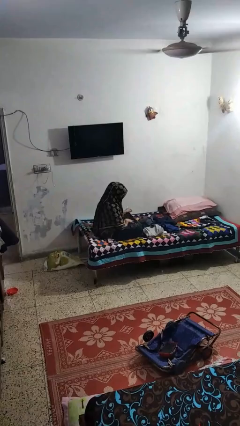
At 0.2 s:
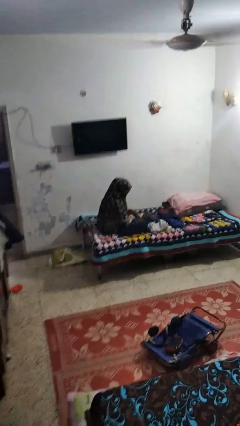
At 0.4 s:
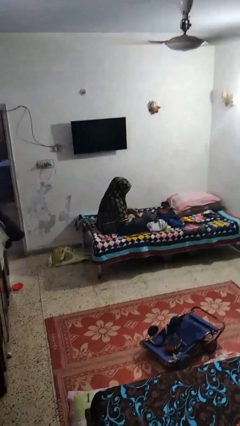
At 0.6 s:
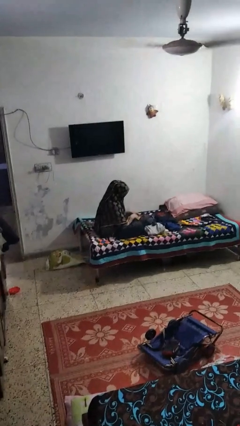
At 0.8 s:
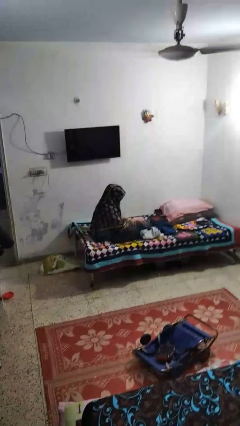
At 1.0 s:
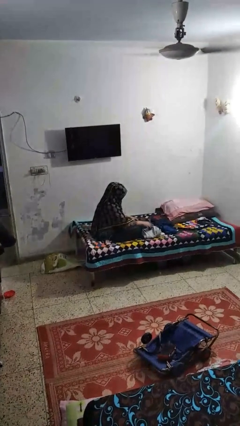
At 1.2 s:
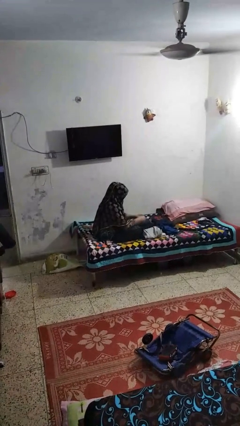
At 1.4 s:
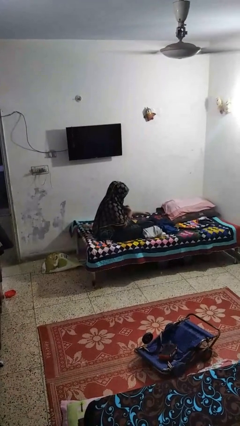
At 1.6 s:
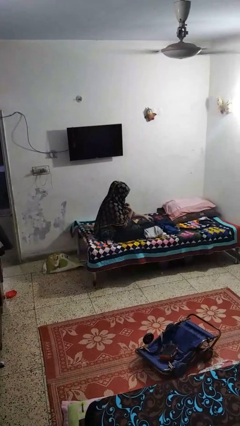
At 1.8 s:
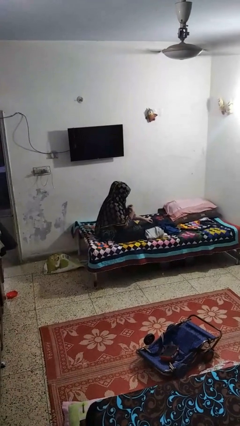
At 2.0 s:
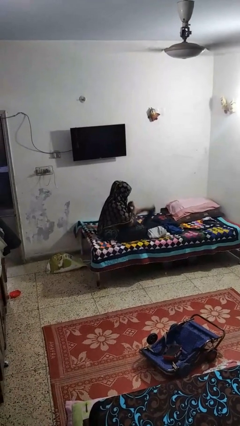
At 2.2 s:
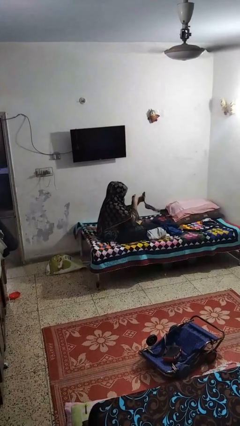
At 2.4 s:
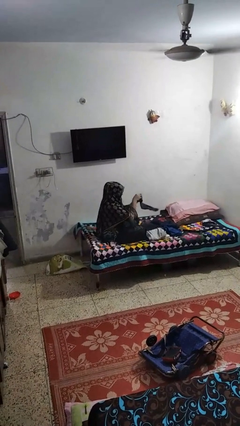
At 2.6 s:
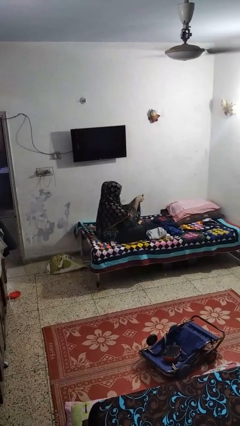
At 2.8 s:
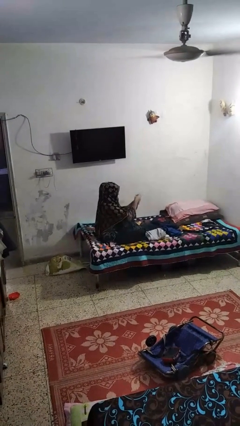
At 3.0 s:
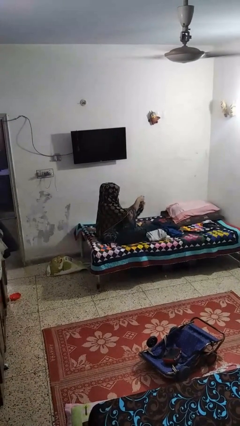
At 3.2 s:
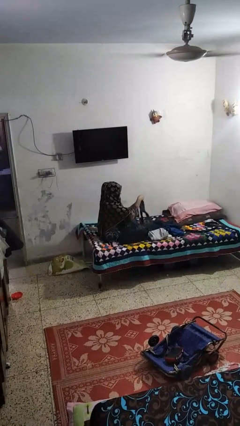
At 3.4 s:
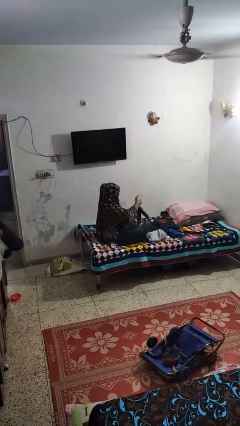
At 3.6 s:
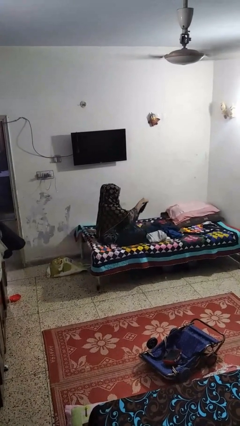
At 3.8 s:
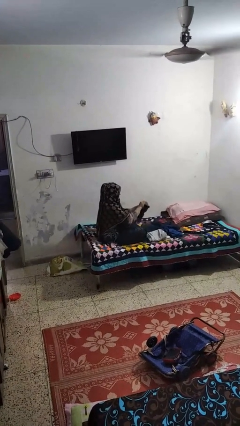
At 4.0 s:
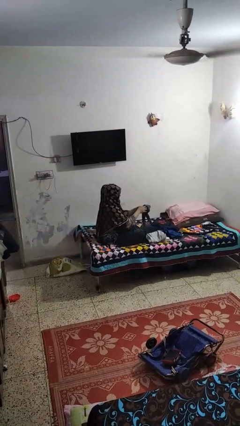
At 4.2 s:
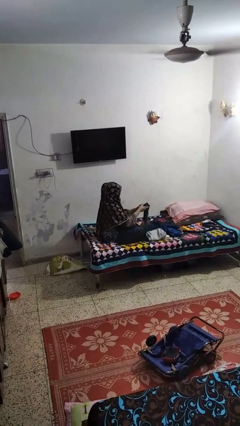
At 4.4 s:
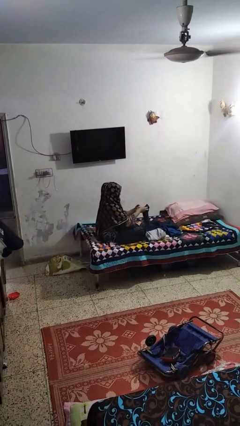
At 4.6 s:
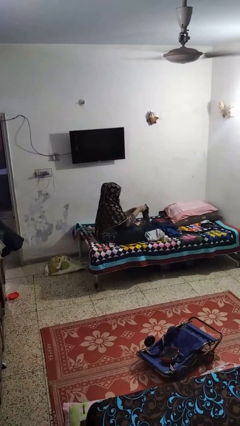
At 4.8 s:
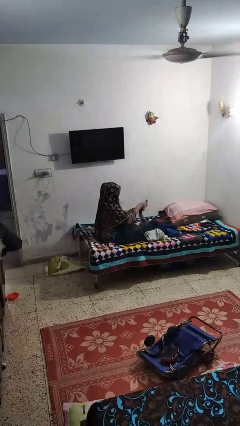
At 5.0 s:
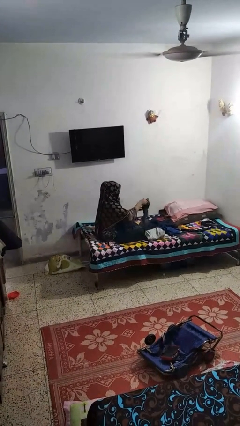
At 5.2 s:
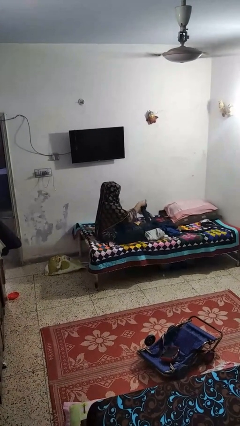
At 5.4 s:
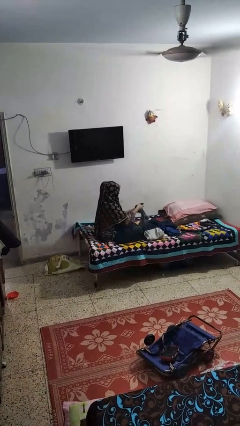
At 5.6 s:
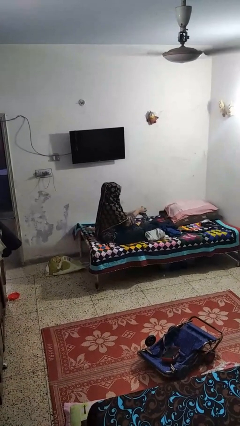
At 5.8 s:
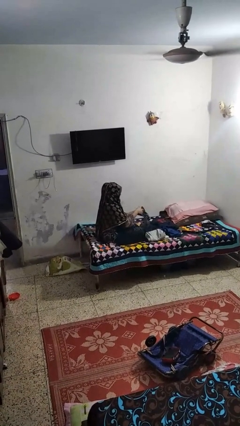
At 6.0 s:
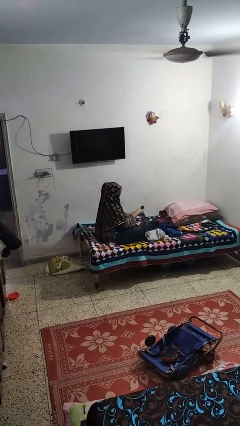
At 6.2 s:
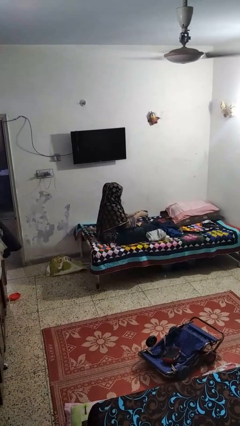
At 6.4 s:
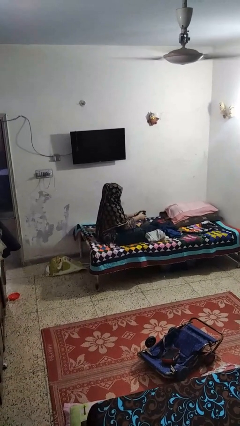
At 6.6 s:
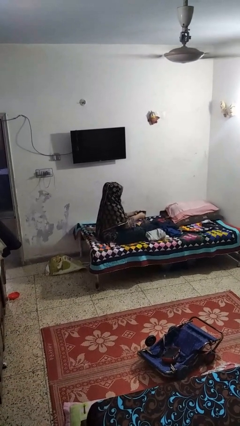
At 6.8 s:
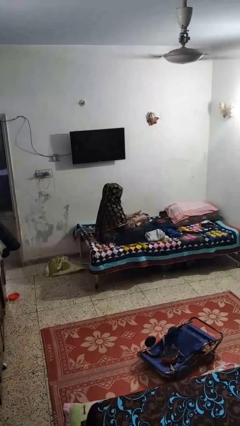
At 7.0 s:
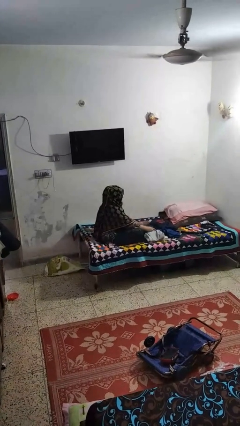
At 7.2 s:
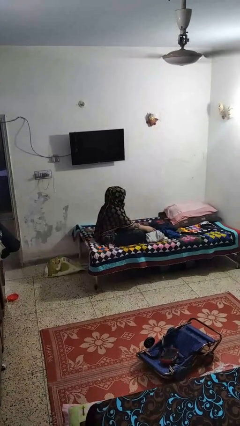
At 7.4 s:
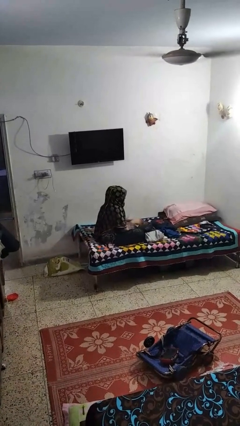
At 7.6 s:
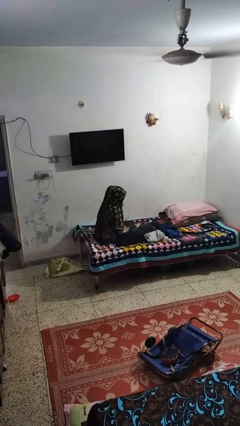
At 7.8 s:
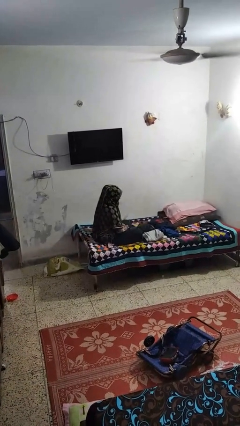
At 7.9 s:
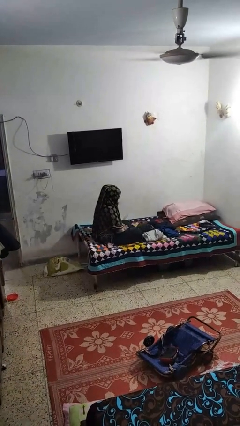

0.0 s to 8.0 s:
person folds socks

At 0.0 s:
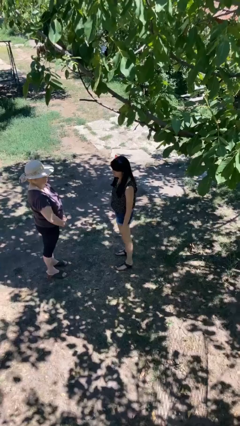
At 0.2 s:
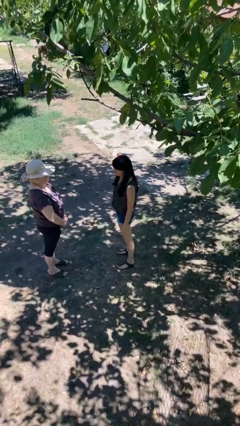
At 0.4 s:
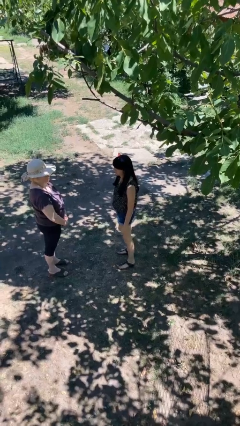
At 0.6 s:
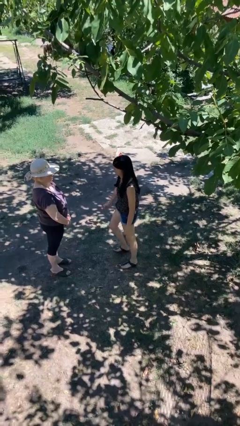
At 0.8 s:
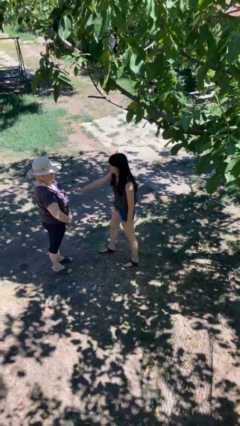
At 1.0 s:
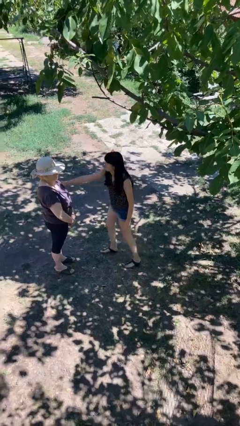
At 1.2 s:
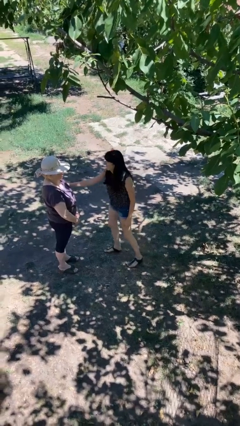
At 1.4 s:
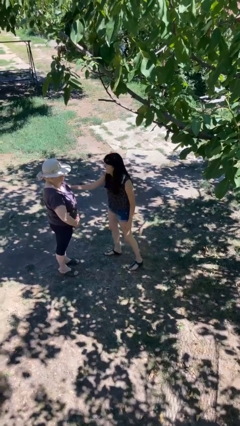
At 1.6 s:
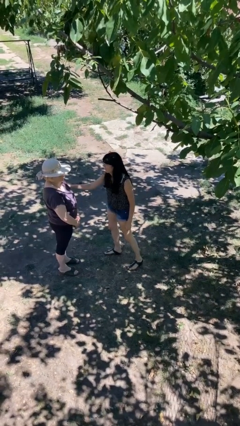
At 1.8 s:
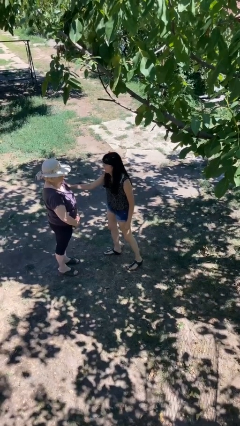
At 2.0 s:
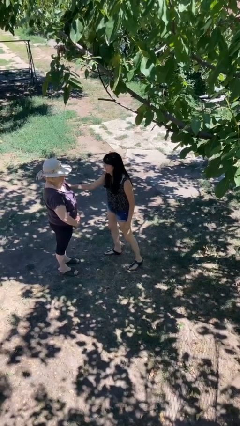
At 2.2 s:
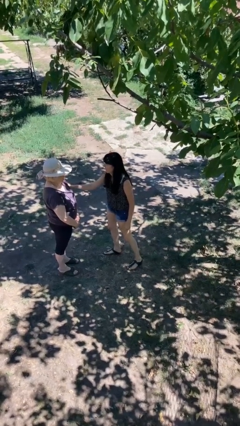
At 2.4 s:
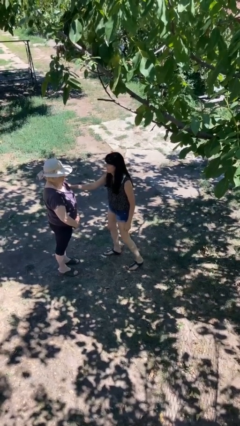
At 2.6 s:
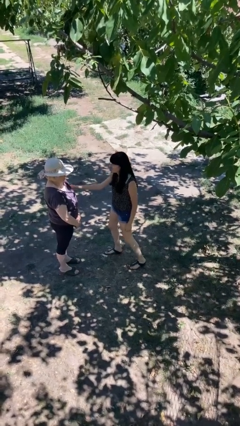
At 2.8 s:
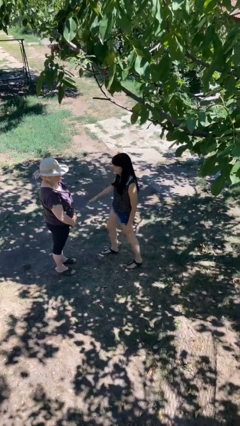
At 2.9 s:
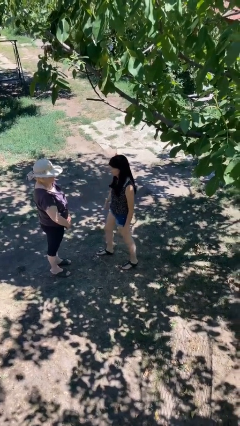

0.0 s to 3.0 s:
person grabs person by bicep

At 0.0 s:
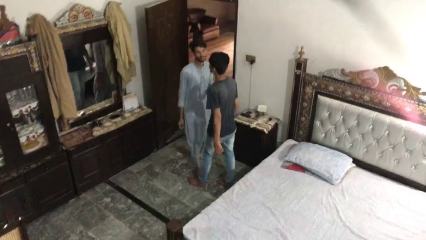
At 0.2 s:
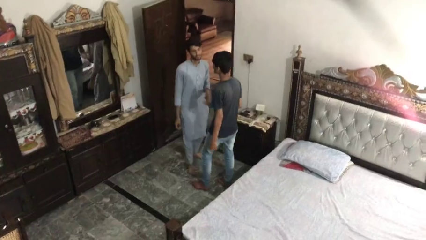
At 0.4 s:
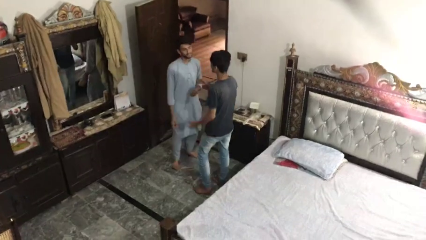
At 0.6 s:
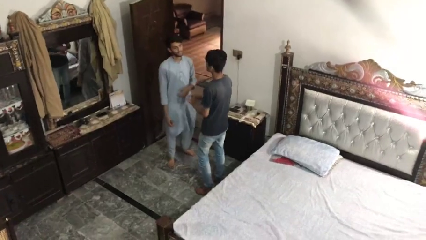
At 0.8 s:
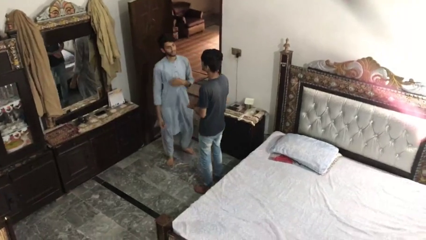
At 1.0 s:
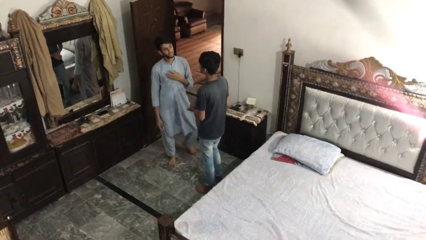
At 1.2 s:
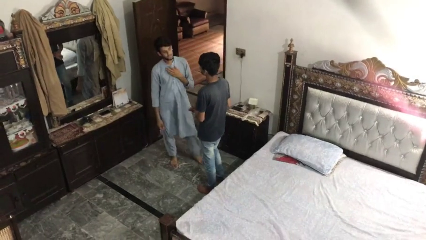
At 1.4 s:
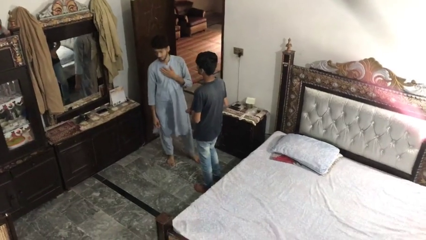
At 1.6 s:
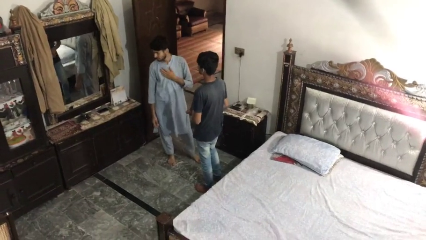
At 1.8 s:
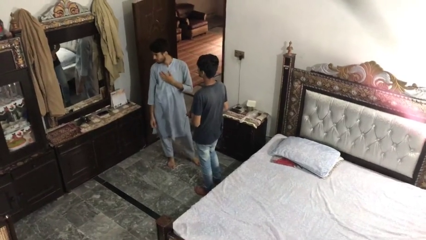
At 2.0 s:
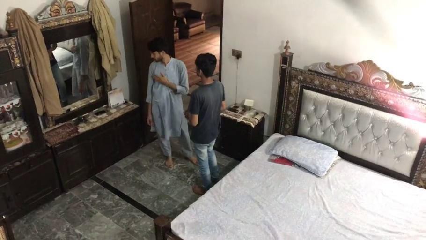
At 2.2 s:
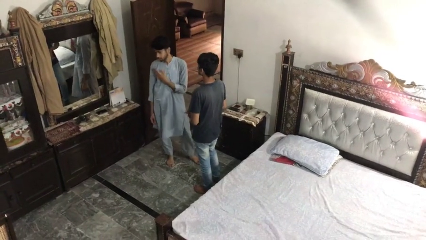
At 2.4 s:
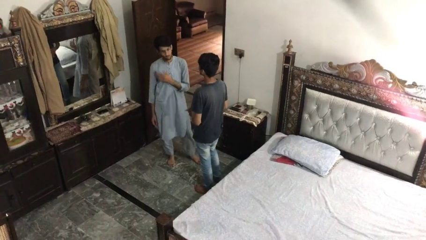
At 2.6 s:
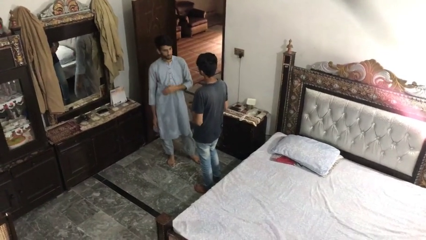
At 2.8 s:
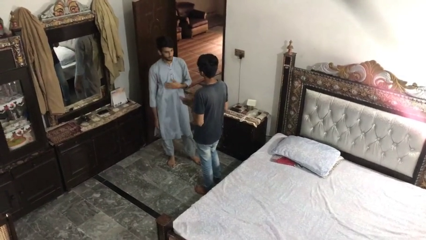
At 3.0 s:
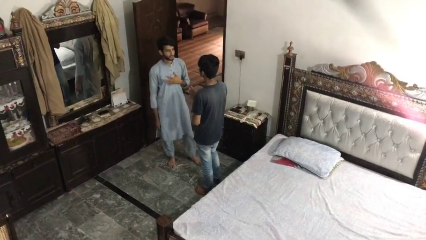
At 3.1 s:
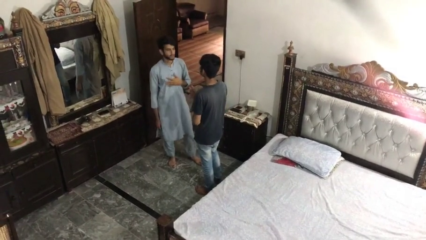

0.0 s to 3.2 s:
person talks to person

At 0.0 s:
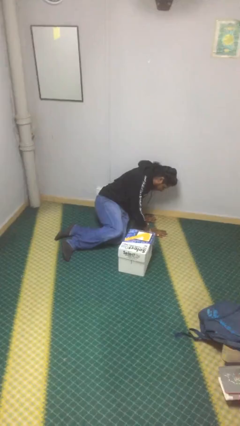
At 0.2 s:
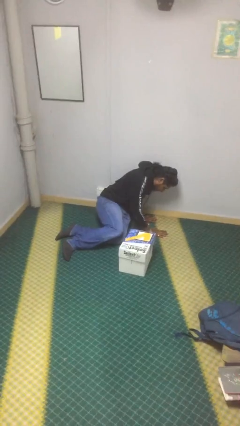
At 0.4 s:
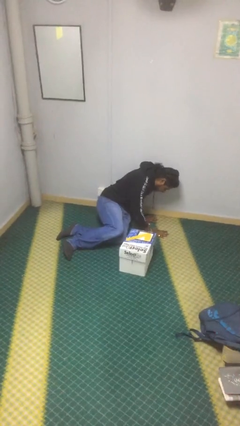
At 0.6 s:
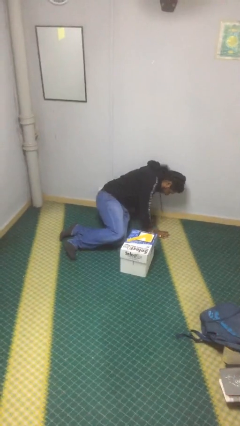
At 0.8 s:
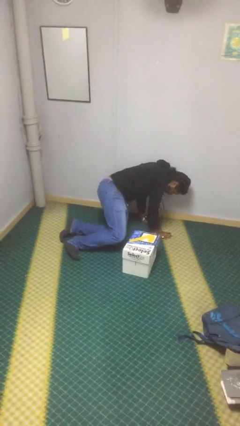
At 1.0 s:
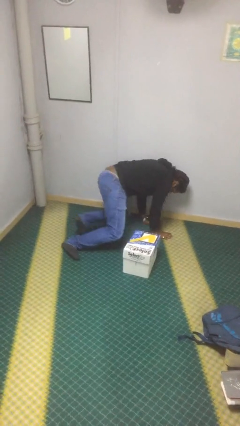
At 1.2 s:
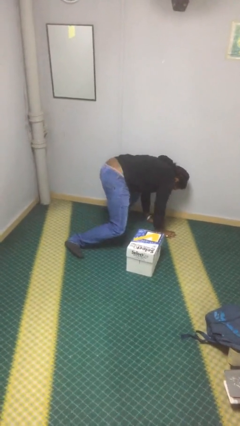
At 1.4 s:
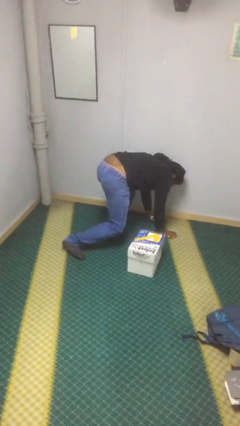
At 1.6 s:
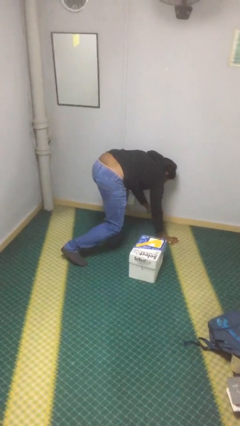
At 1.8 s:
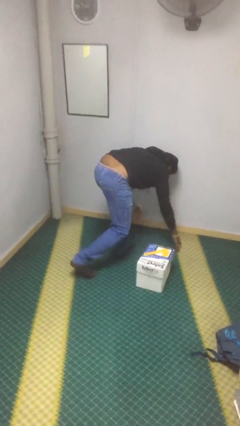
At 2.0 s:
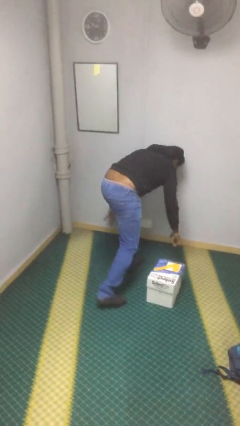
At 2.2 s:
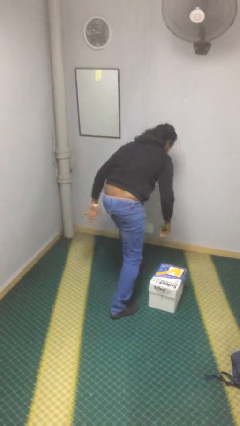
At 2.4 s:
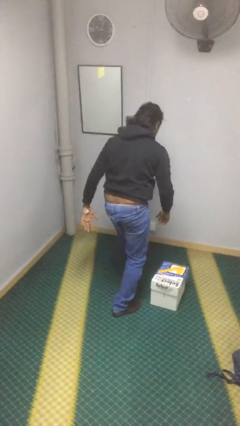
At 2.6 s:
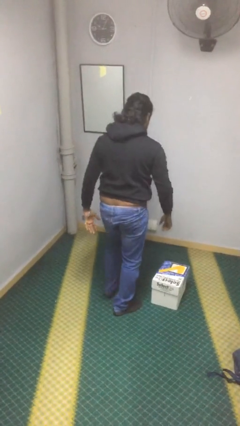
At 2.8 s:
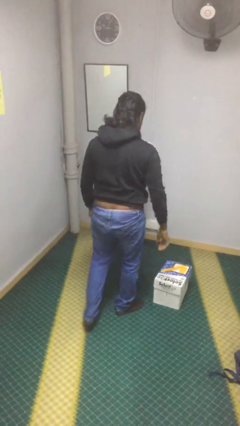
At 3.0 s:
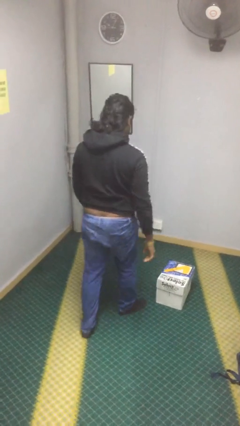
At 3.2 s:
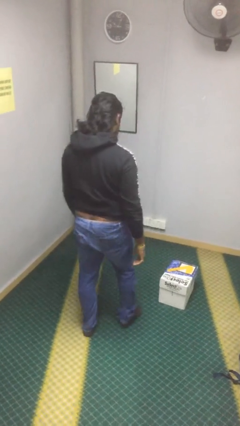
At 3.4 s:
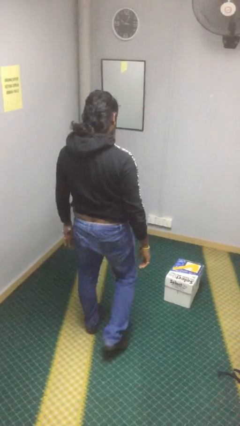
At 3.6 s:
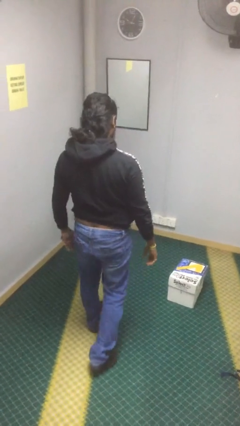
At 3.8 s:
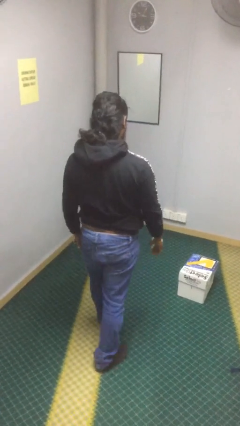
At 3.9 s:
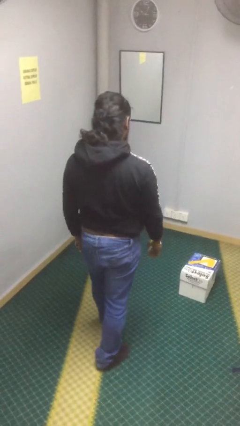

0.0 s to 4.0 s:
person stands up from floor
